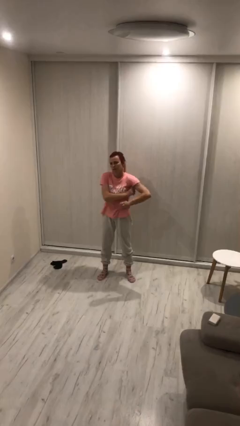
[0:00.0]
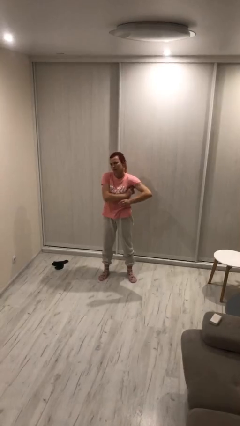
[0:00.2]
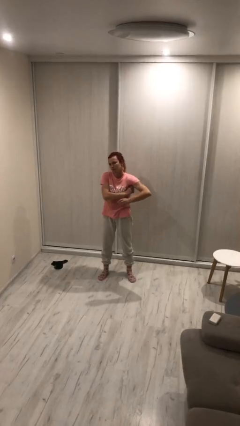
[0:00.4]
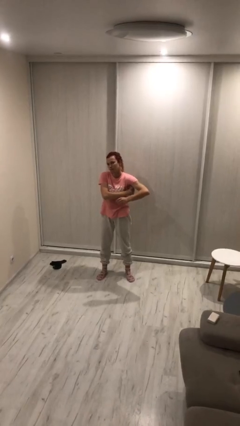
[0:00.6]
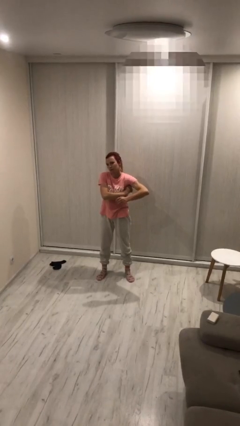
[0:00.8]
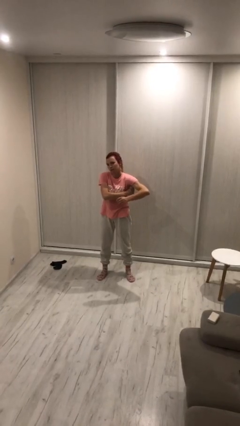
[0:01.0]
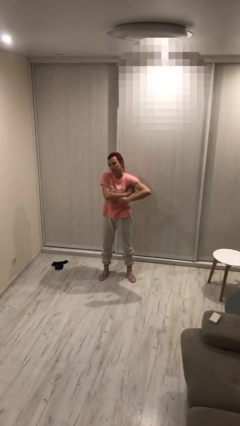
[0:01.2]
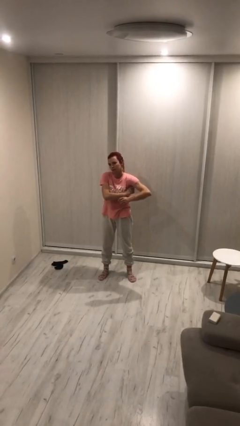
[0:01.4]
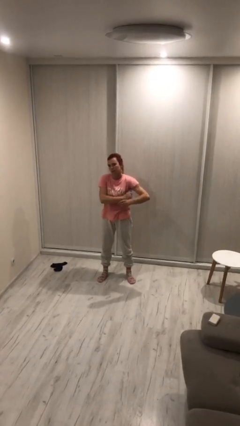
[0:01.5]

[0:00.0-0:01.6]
person applies deodorant

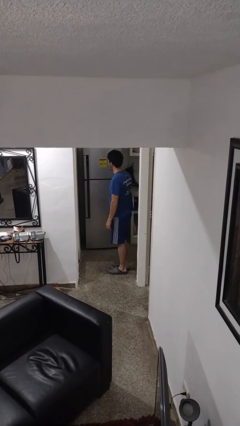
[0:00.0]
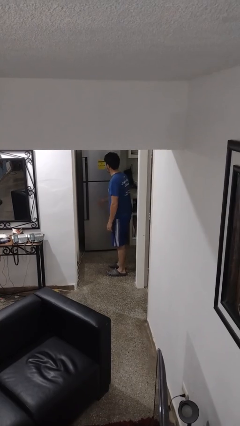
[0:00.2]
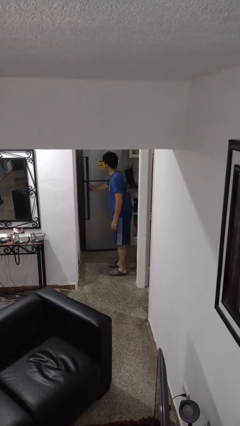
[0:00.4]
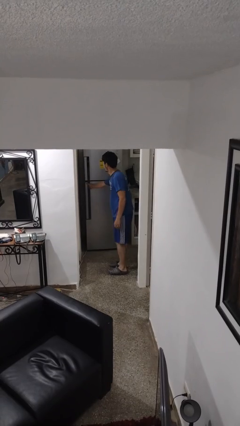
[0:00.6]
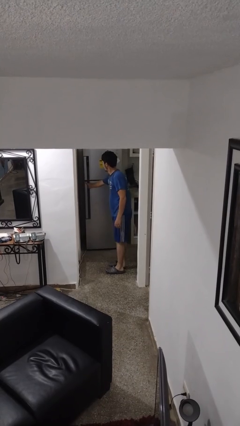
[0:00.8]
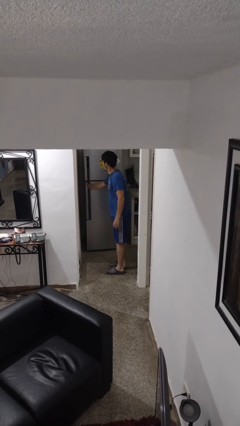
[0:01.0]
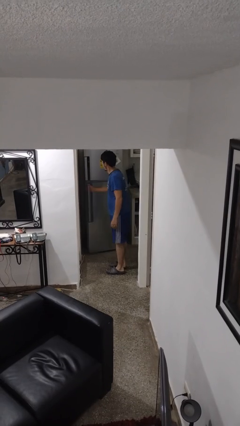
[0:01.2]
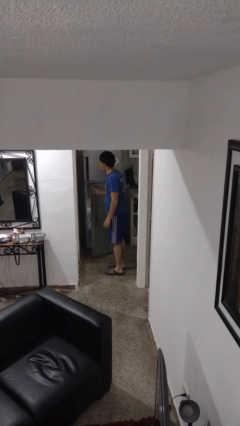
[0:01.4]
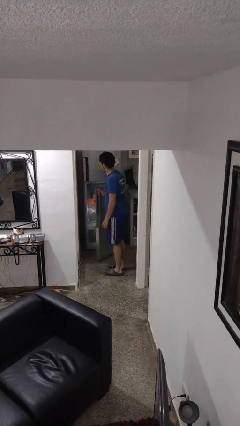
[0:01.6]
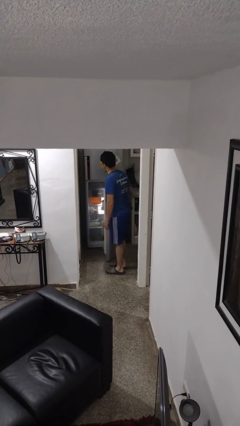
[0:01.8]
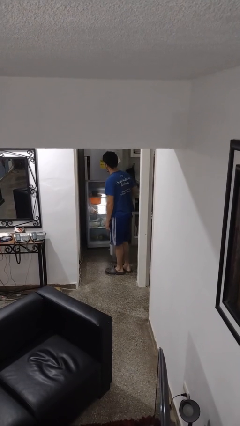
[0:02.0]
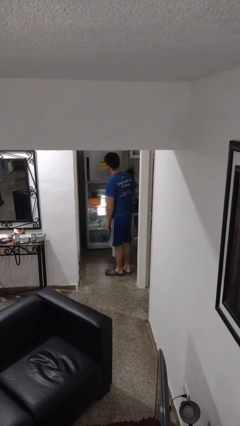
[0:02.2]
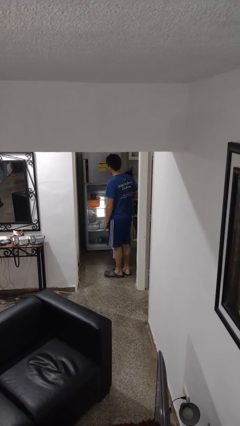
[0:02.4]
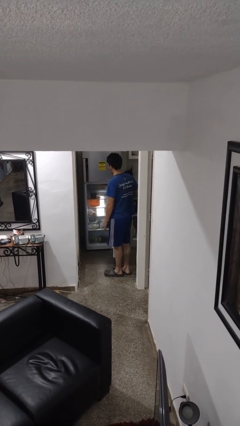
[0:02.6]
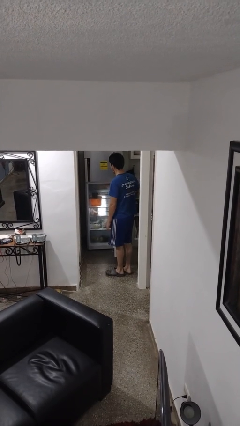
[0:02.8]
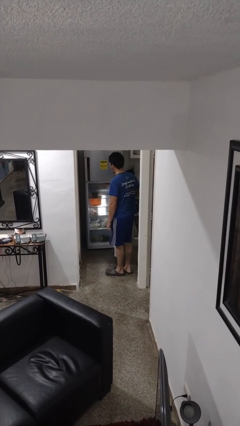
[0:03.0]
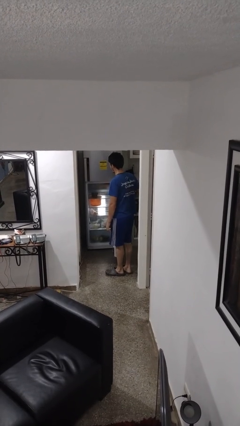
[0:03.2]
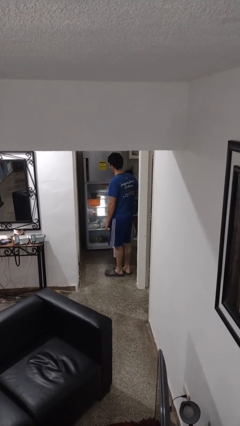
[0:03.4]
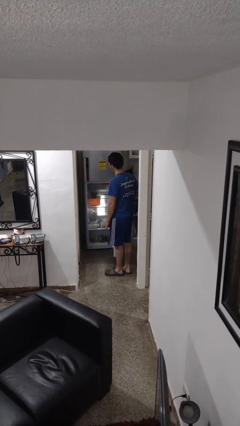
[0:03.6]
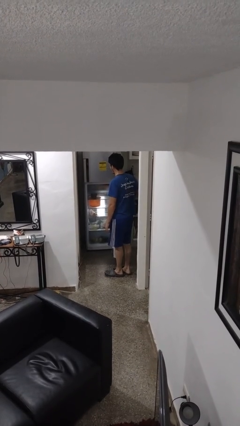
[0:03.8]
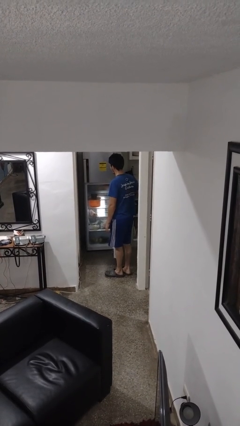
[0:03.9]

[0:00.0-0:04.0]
person opens refrigerator

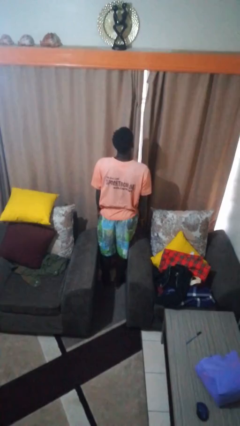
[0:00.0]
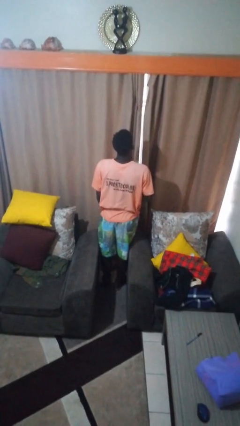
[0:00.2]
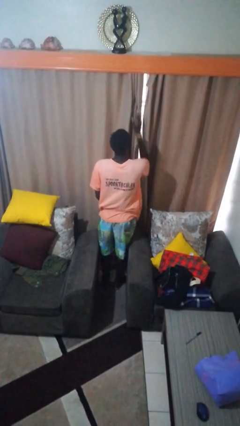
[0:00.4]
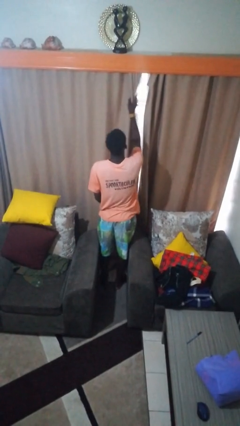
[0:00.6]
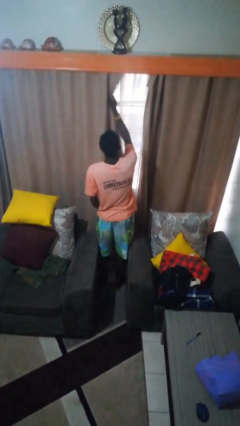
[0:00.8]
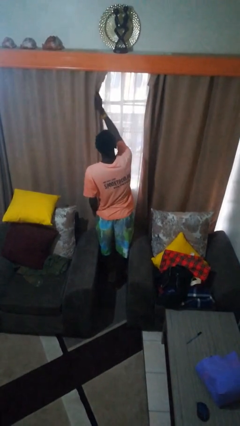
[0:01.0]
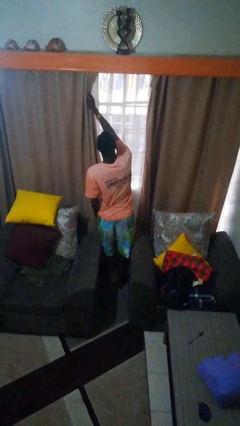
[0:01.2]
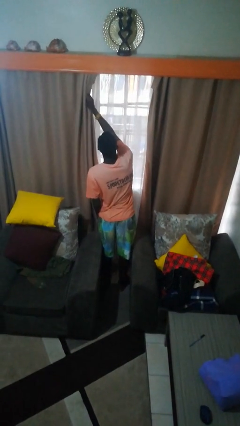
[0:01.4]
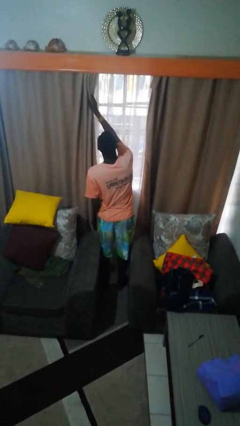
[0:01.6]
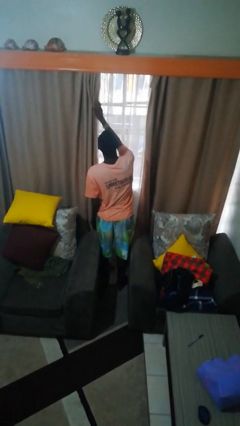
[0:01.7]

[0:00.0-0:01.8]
person opens curtains

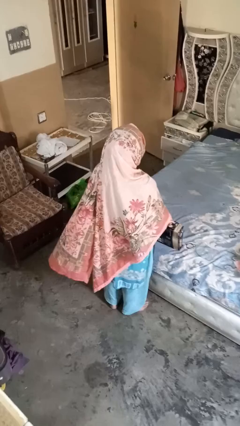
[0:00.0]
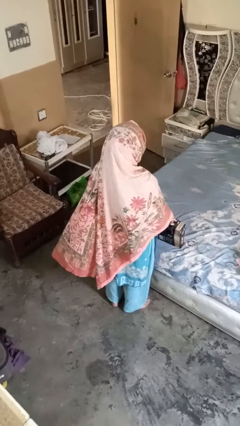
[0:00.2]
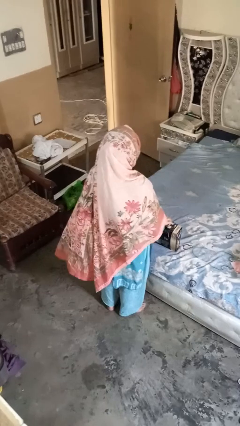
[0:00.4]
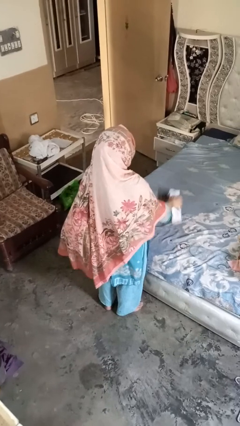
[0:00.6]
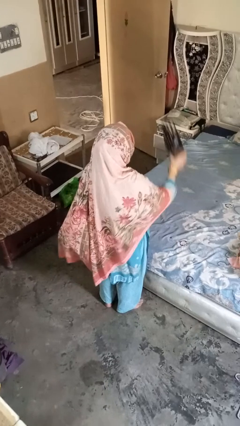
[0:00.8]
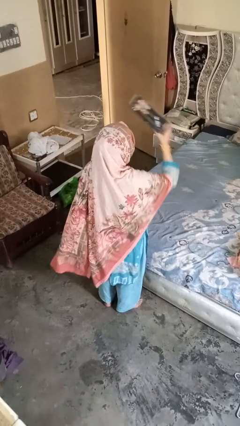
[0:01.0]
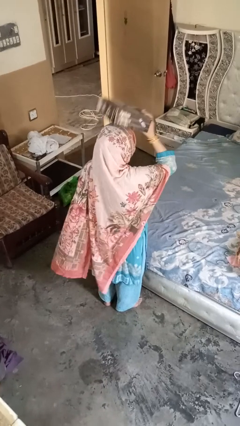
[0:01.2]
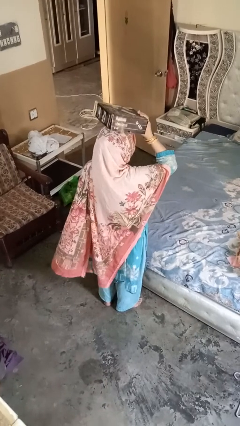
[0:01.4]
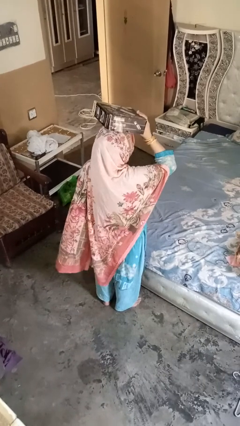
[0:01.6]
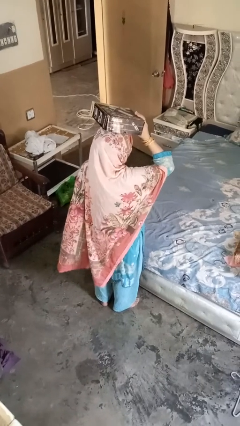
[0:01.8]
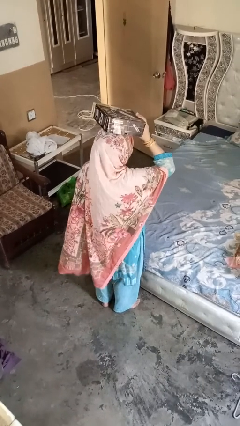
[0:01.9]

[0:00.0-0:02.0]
person holds object above head

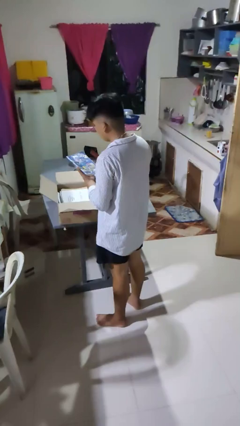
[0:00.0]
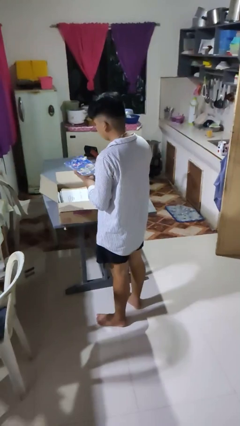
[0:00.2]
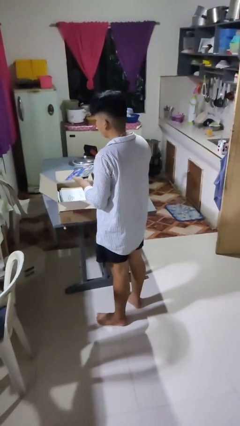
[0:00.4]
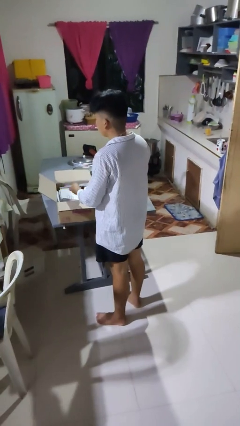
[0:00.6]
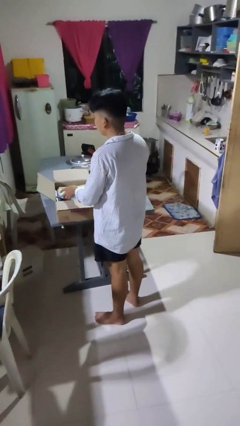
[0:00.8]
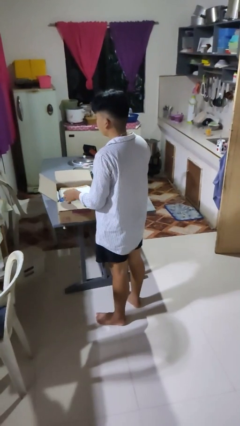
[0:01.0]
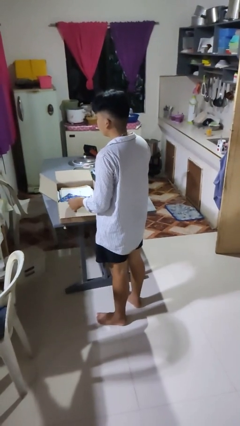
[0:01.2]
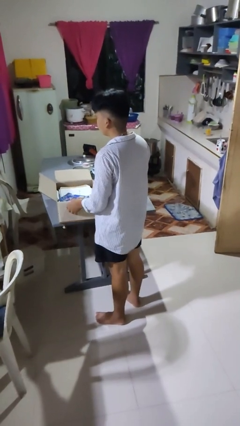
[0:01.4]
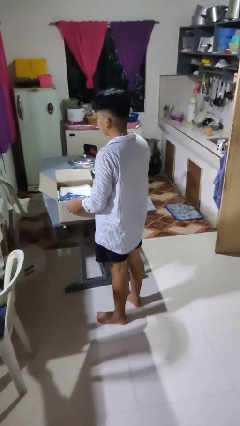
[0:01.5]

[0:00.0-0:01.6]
person puts object into box

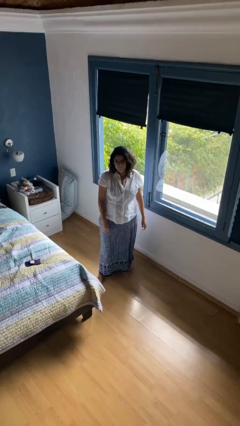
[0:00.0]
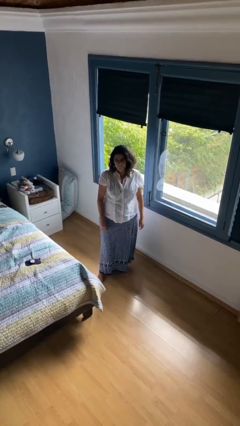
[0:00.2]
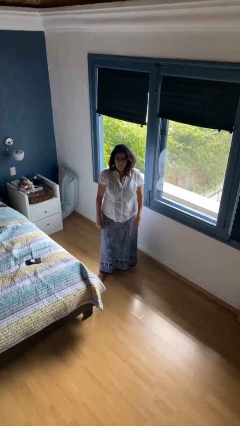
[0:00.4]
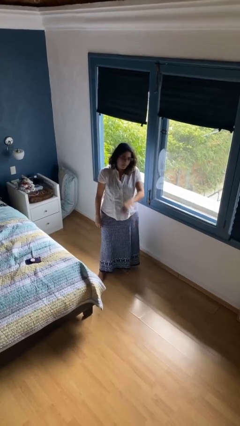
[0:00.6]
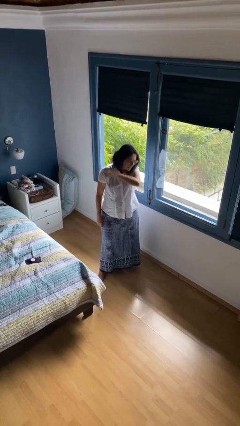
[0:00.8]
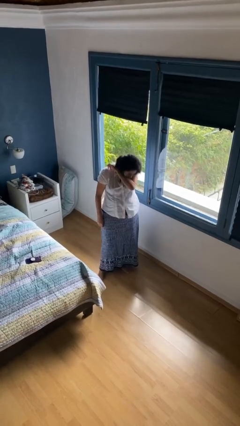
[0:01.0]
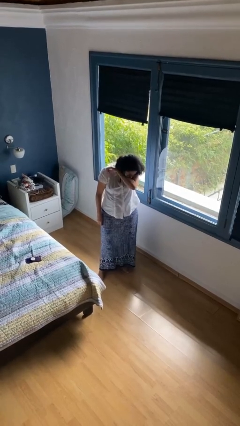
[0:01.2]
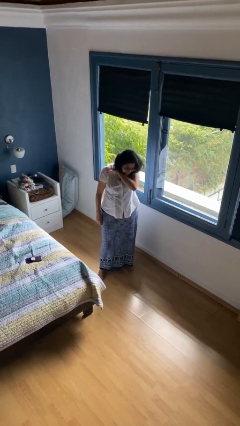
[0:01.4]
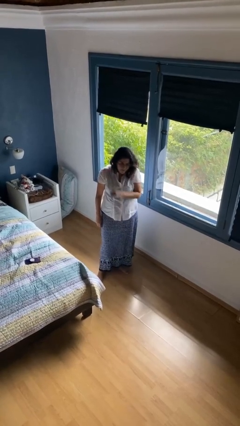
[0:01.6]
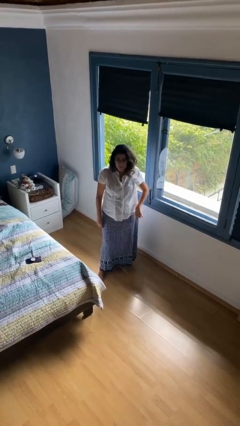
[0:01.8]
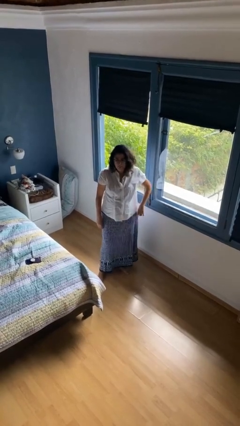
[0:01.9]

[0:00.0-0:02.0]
person sneezes into arm

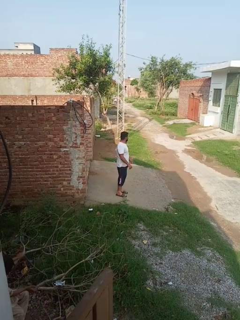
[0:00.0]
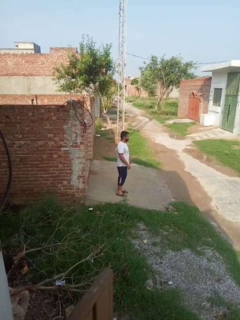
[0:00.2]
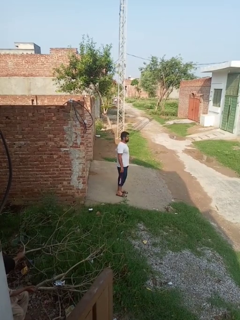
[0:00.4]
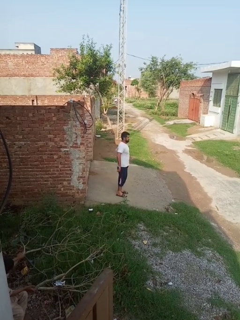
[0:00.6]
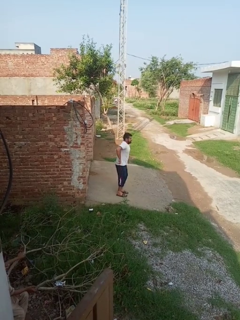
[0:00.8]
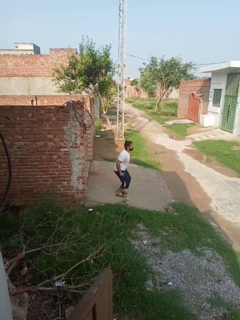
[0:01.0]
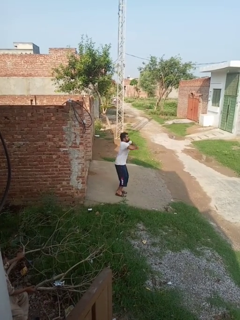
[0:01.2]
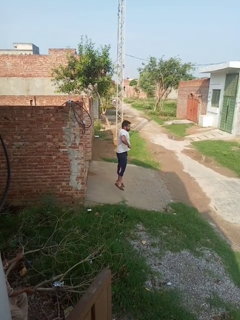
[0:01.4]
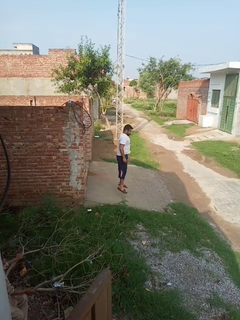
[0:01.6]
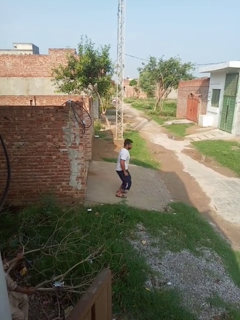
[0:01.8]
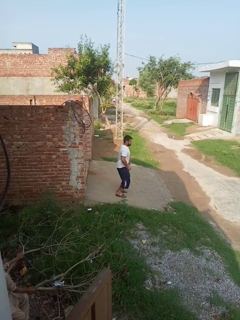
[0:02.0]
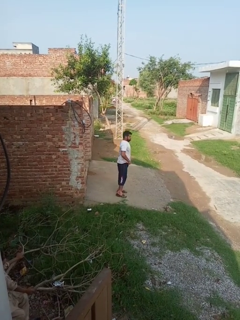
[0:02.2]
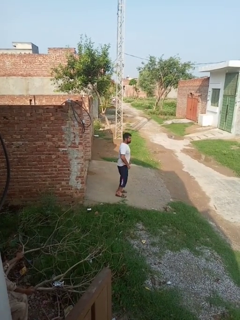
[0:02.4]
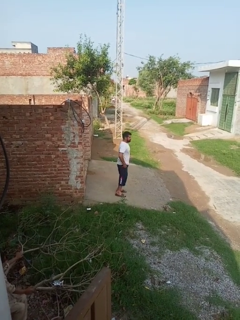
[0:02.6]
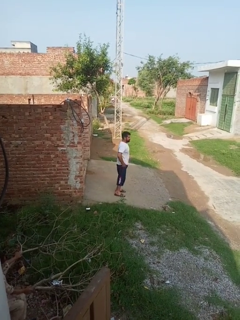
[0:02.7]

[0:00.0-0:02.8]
person jumps

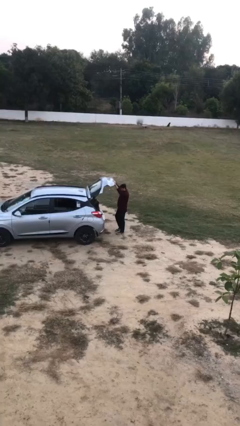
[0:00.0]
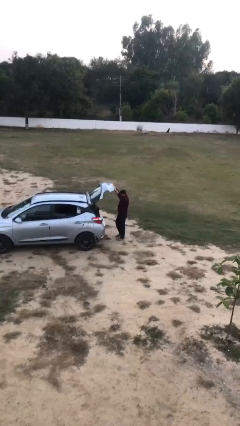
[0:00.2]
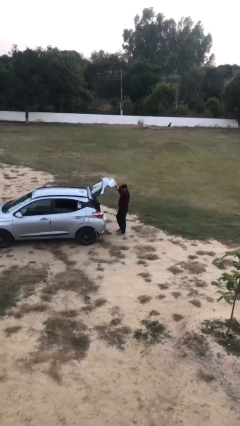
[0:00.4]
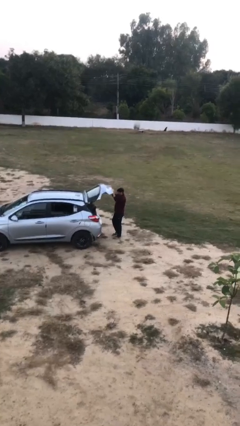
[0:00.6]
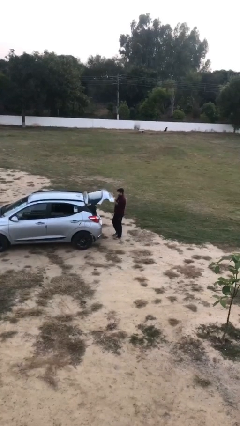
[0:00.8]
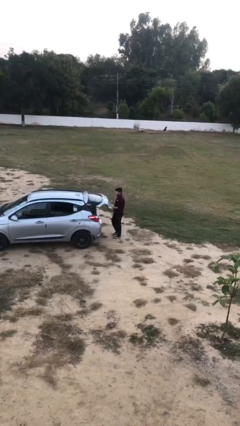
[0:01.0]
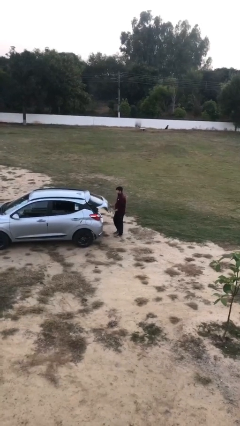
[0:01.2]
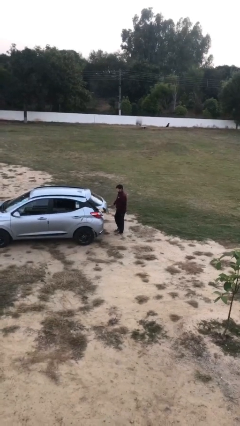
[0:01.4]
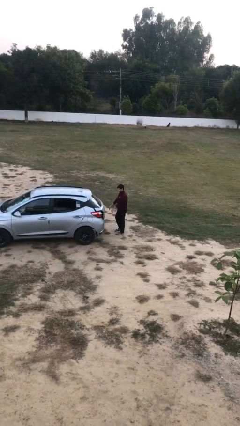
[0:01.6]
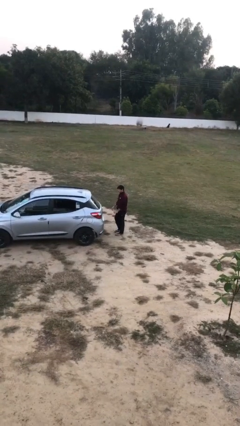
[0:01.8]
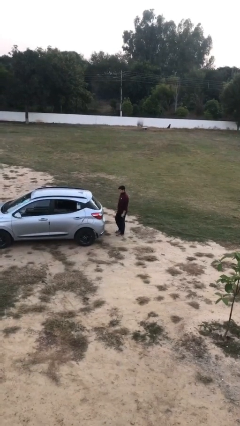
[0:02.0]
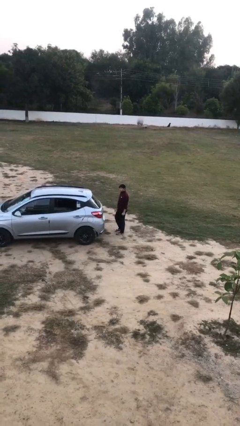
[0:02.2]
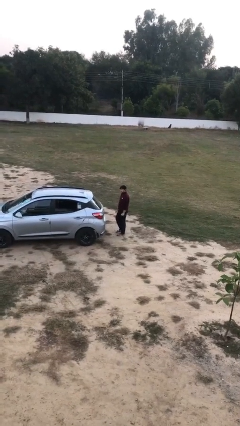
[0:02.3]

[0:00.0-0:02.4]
person closes car trunk
